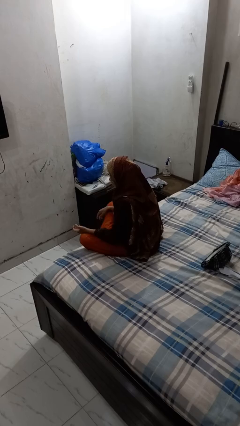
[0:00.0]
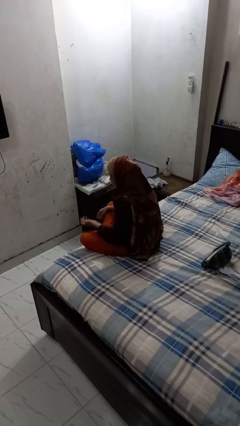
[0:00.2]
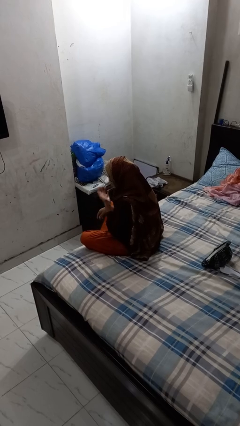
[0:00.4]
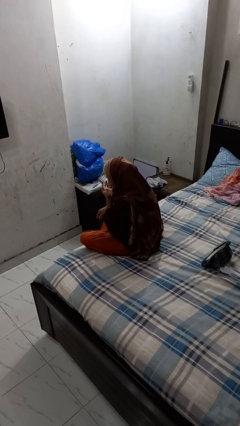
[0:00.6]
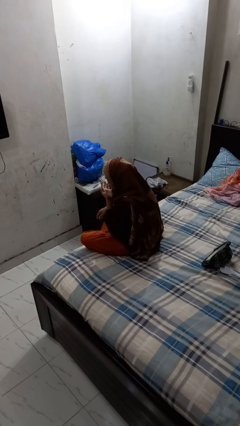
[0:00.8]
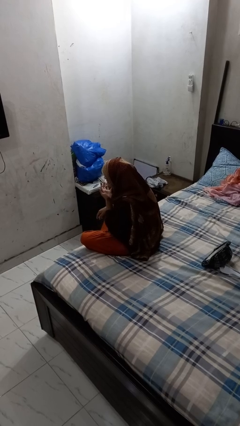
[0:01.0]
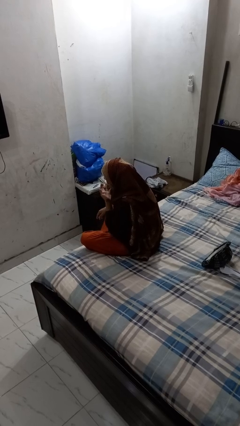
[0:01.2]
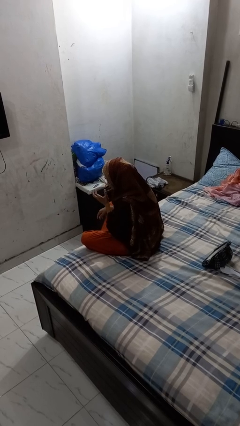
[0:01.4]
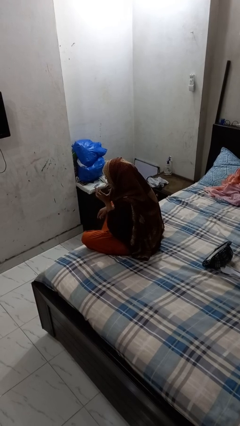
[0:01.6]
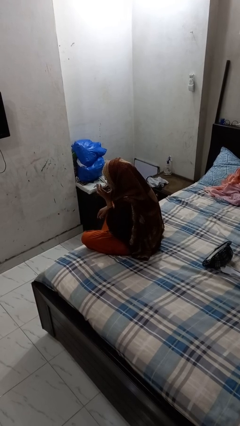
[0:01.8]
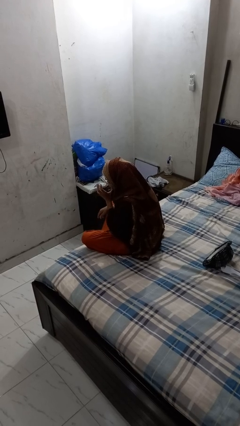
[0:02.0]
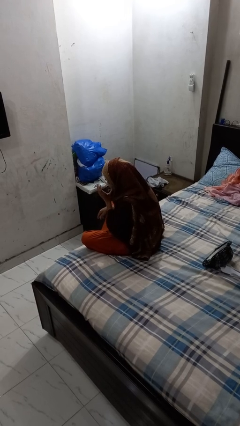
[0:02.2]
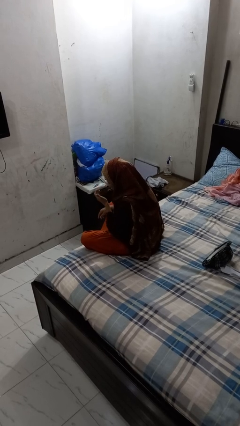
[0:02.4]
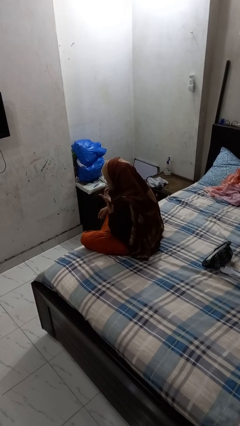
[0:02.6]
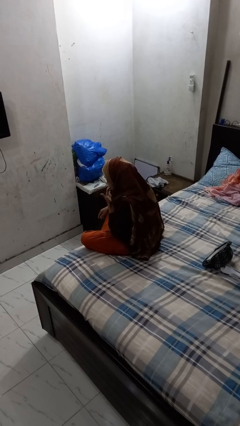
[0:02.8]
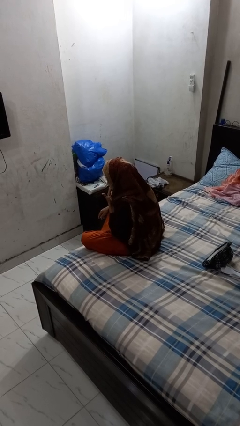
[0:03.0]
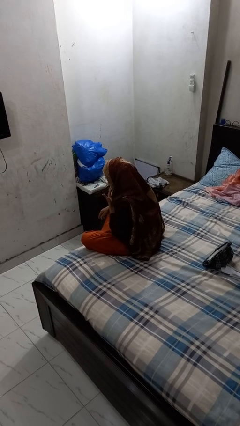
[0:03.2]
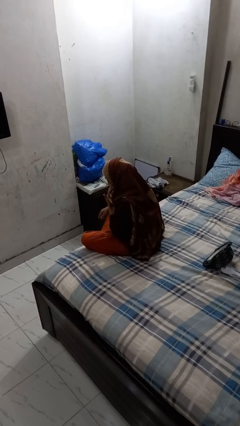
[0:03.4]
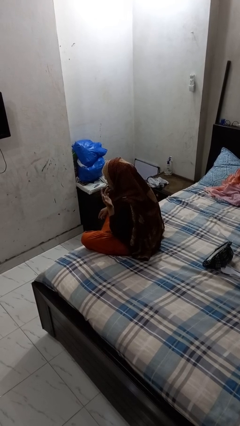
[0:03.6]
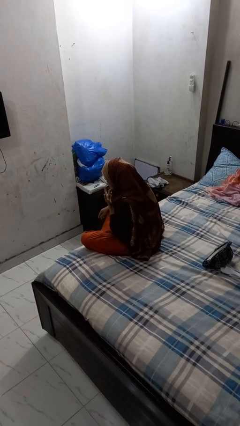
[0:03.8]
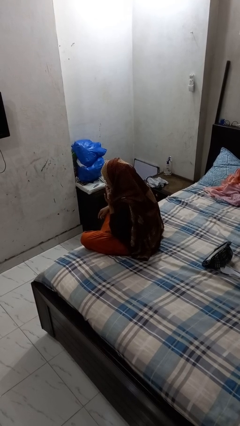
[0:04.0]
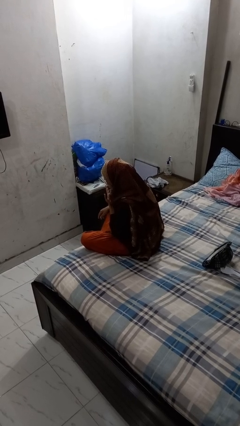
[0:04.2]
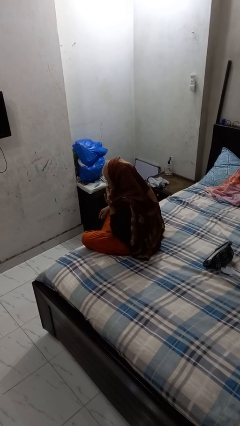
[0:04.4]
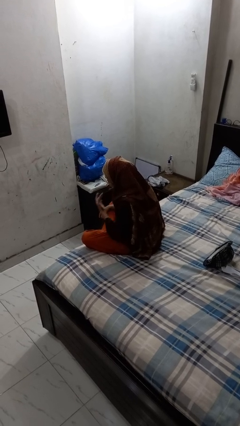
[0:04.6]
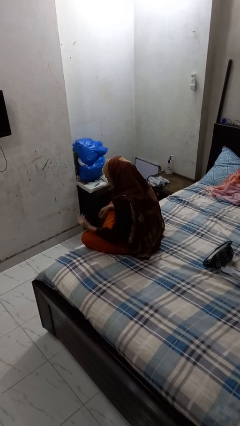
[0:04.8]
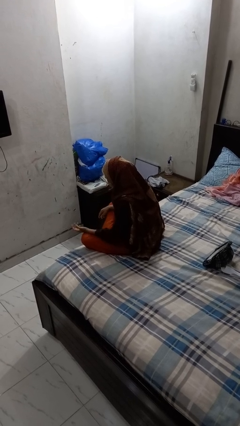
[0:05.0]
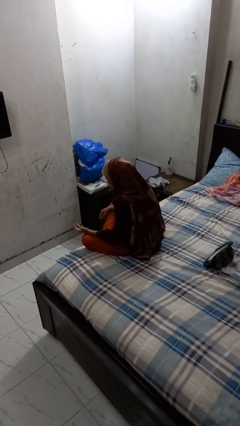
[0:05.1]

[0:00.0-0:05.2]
person licks fingers

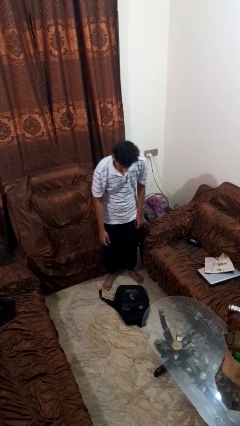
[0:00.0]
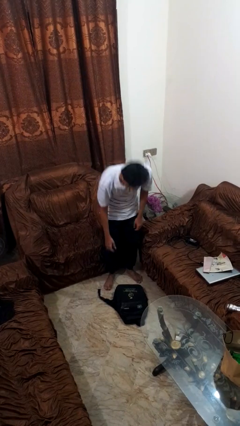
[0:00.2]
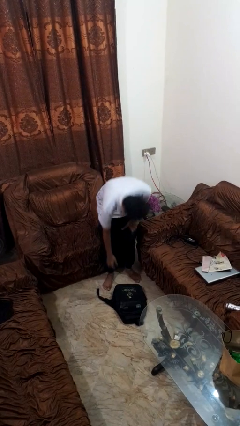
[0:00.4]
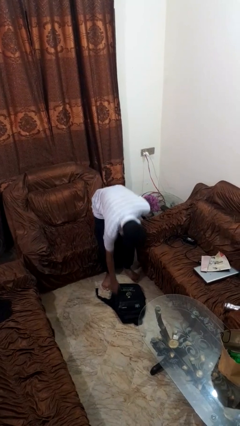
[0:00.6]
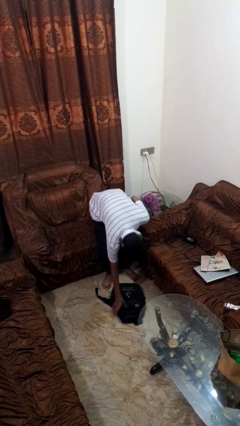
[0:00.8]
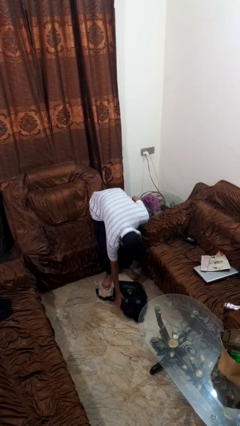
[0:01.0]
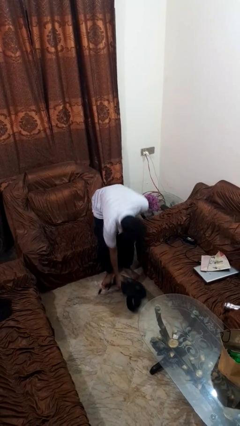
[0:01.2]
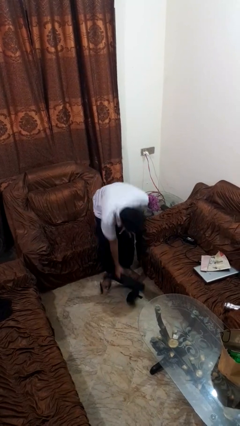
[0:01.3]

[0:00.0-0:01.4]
person picks up object from floor

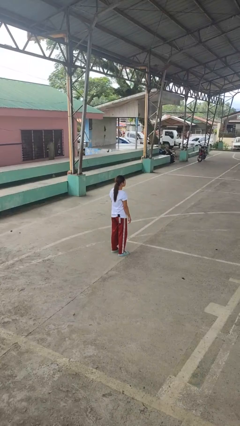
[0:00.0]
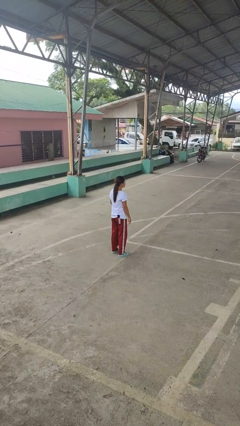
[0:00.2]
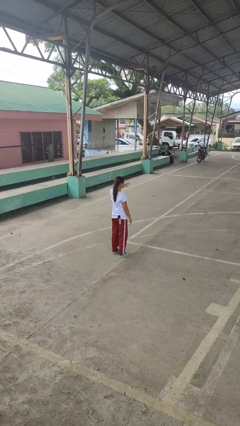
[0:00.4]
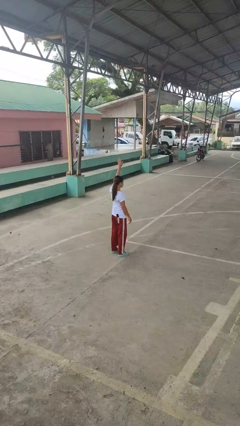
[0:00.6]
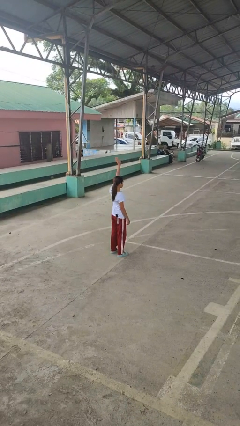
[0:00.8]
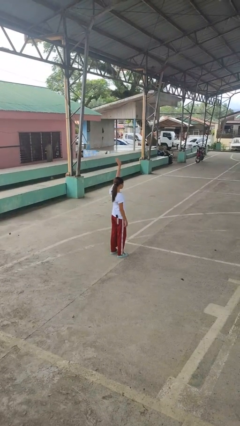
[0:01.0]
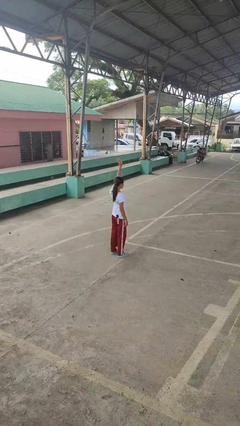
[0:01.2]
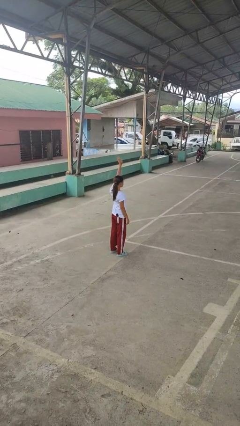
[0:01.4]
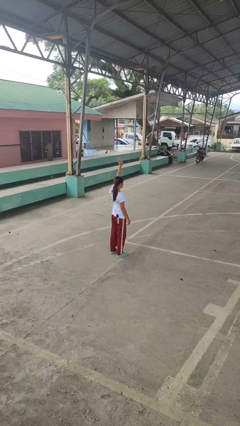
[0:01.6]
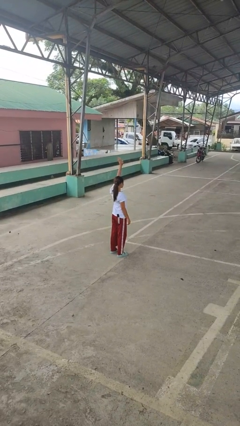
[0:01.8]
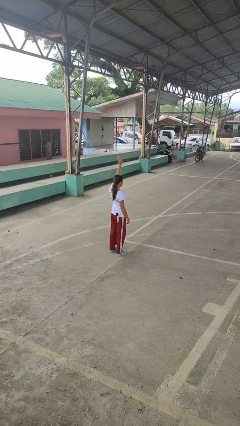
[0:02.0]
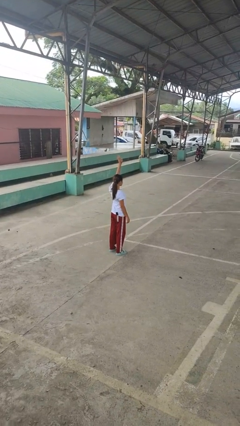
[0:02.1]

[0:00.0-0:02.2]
person gestures raise hand

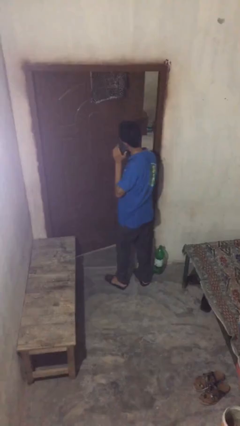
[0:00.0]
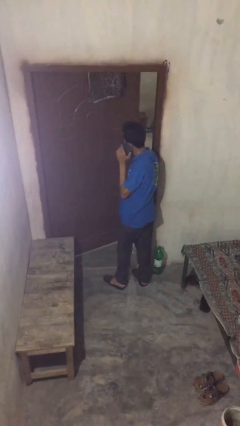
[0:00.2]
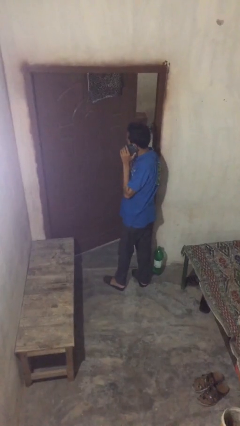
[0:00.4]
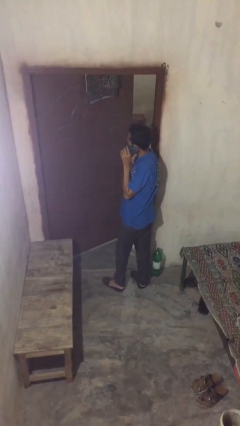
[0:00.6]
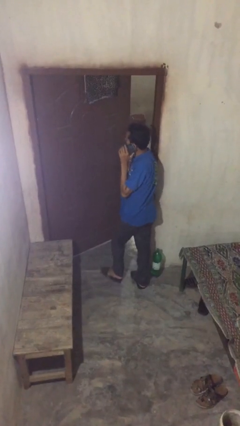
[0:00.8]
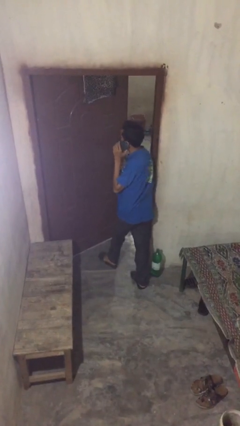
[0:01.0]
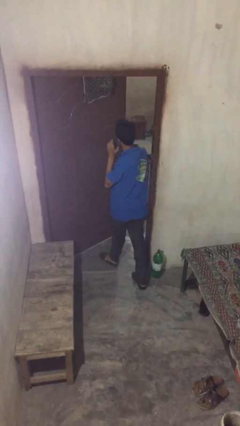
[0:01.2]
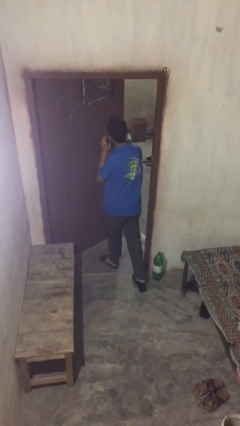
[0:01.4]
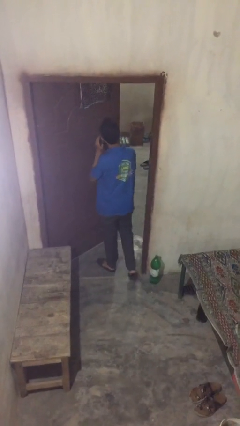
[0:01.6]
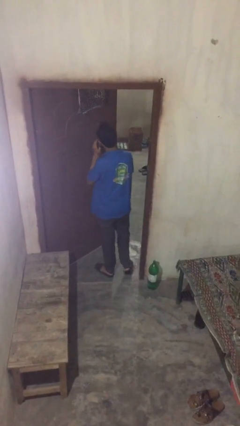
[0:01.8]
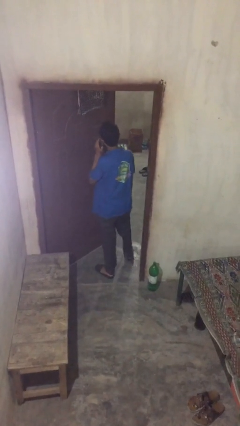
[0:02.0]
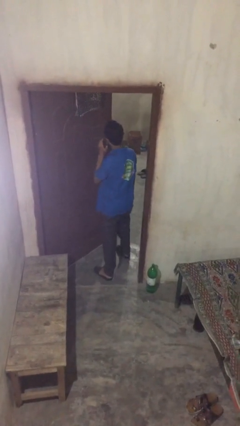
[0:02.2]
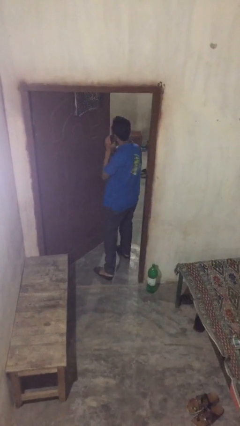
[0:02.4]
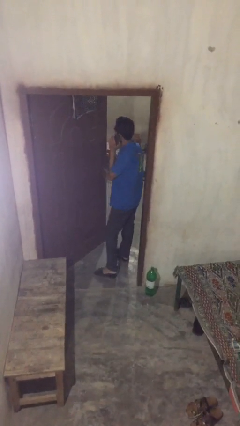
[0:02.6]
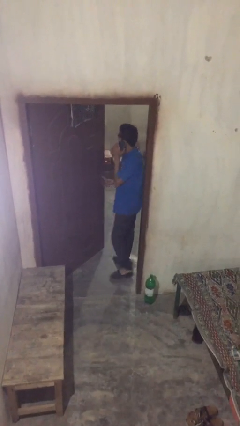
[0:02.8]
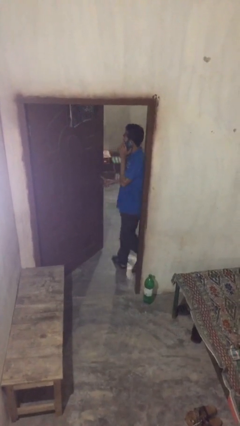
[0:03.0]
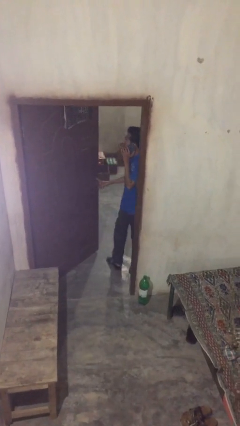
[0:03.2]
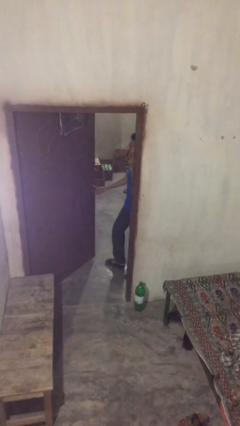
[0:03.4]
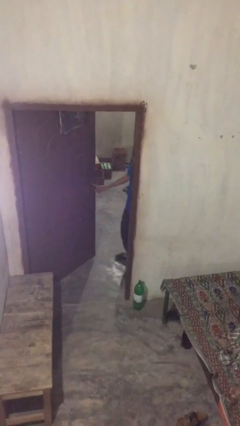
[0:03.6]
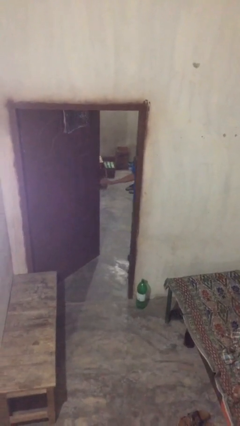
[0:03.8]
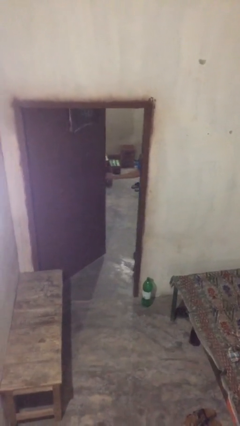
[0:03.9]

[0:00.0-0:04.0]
person exits scene through structure

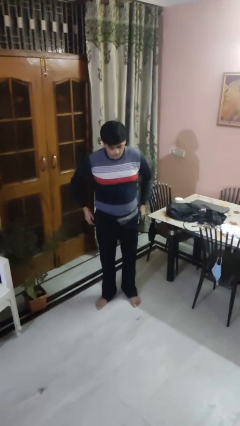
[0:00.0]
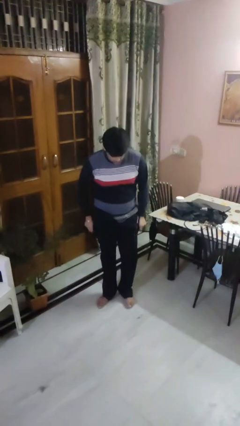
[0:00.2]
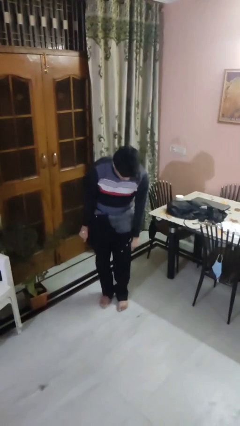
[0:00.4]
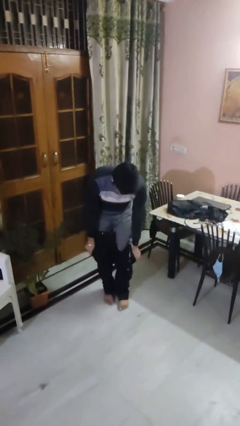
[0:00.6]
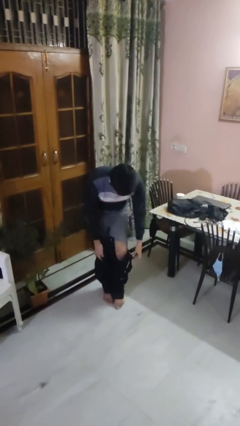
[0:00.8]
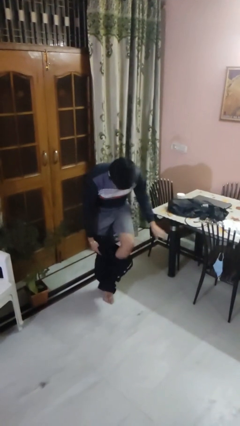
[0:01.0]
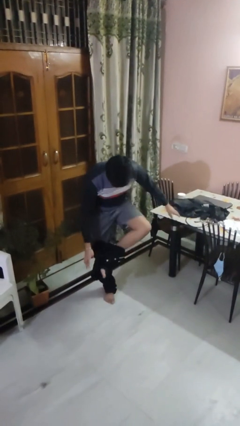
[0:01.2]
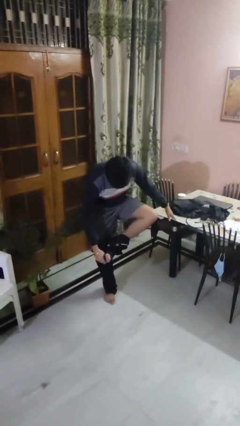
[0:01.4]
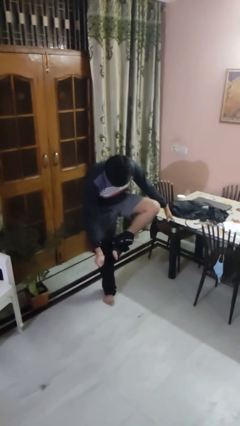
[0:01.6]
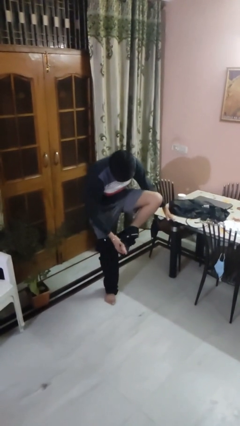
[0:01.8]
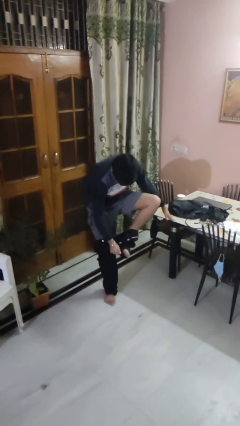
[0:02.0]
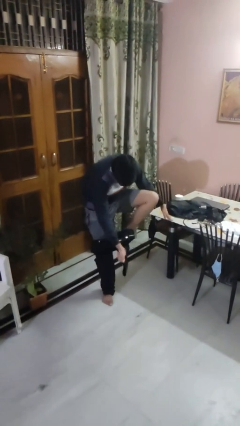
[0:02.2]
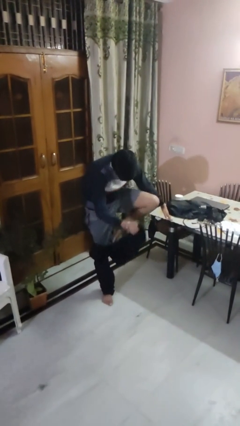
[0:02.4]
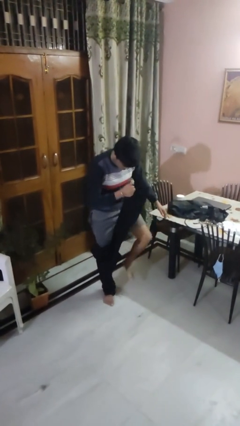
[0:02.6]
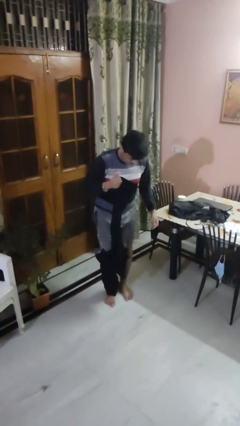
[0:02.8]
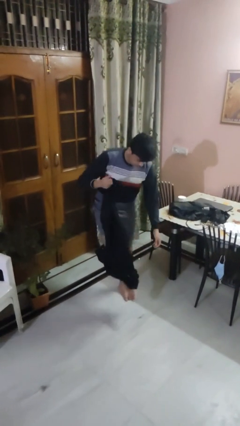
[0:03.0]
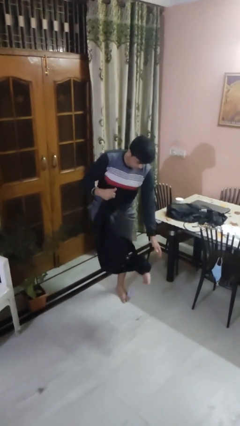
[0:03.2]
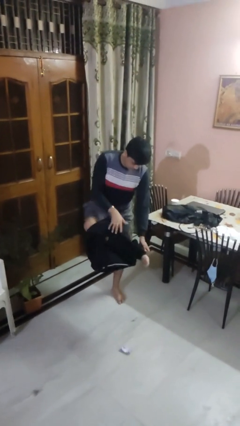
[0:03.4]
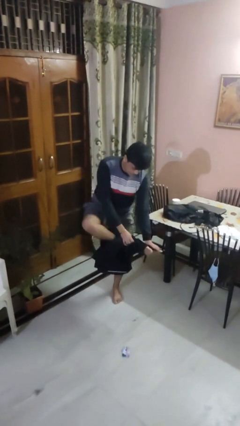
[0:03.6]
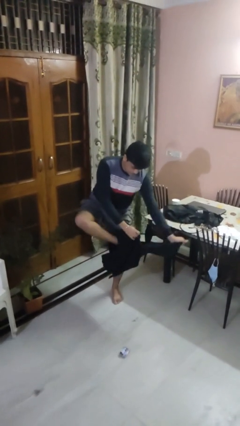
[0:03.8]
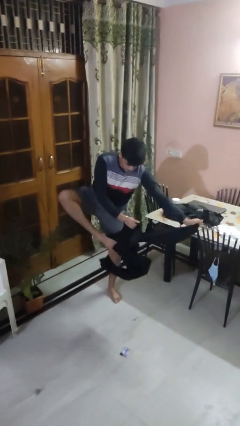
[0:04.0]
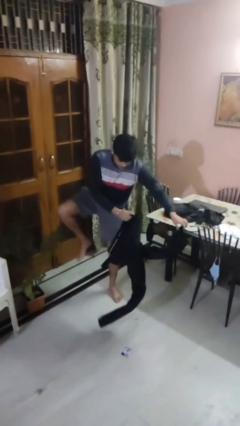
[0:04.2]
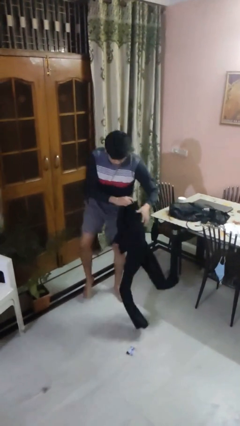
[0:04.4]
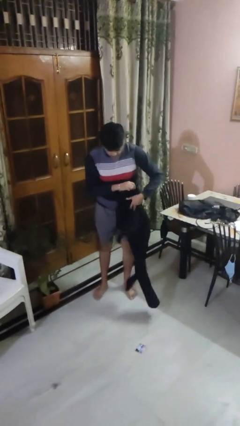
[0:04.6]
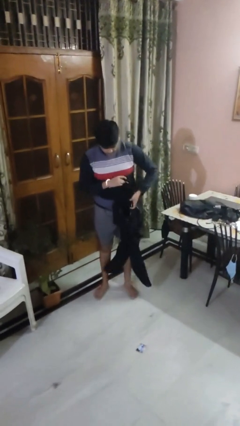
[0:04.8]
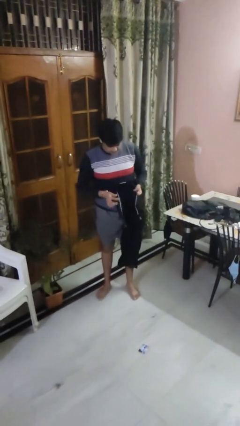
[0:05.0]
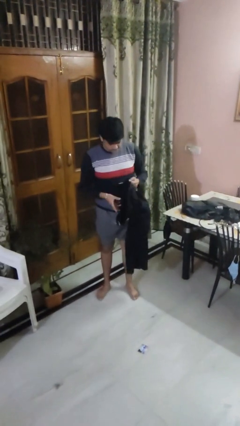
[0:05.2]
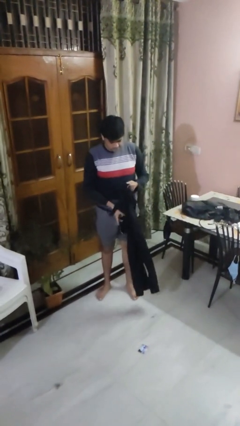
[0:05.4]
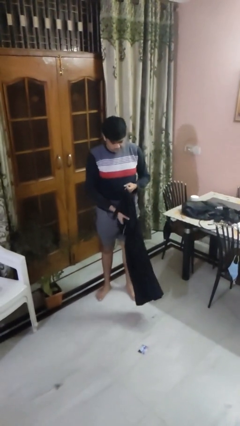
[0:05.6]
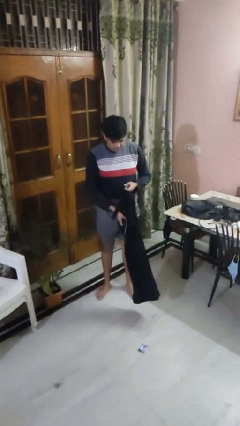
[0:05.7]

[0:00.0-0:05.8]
person takes off pants
